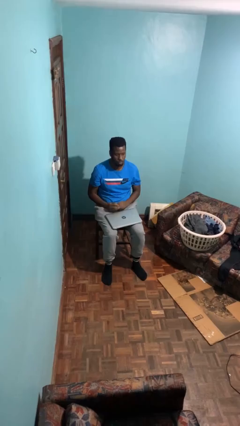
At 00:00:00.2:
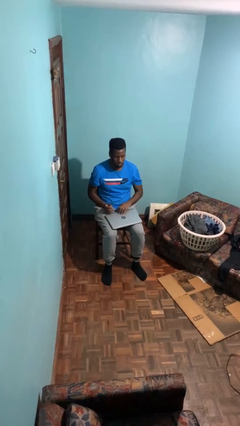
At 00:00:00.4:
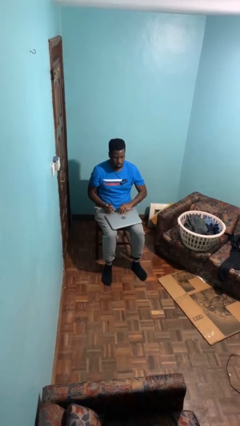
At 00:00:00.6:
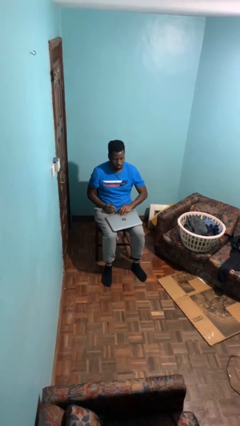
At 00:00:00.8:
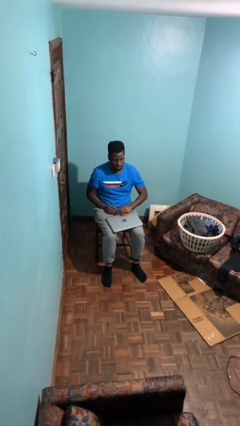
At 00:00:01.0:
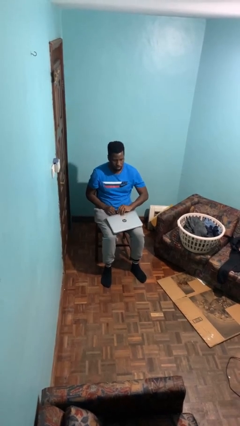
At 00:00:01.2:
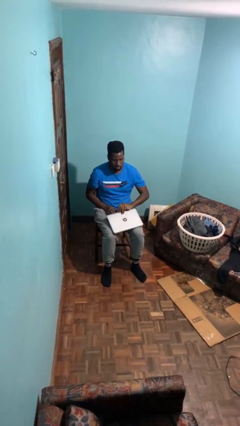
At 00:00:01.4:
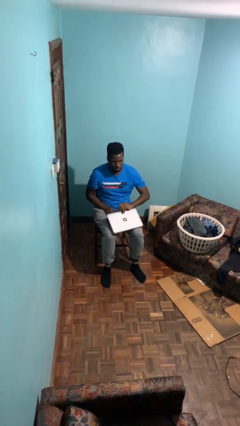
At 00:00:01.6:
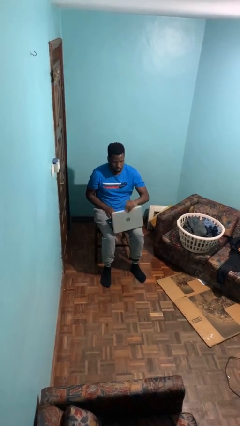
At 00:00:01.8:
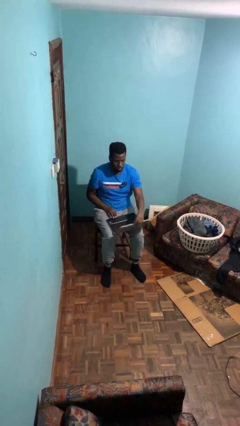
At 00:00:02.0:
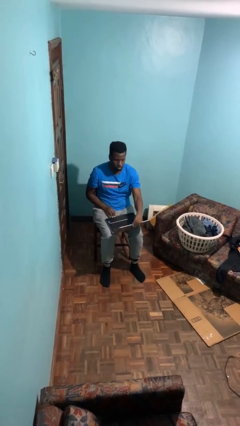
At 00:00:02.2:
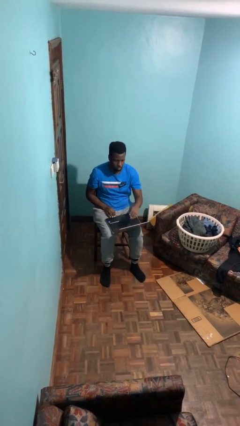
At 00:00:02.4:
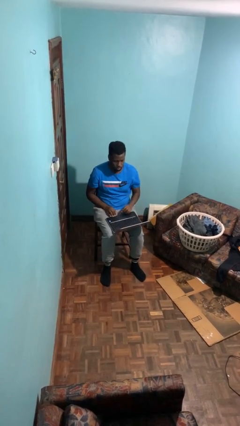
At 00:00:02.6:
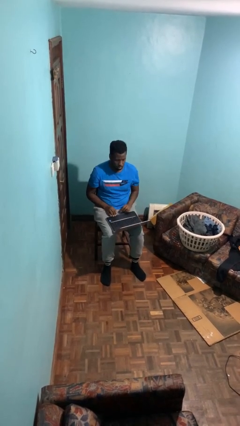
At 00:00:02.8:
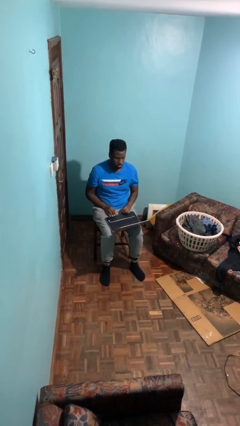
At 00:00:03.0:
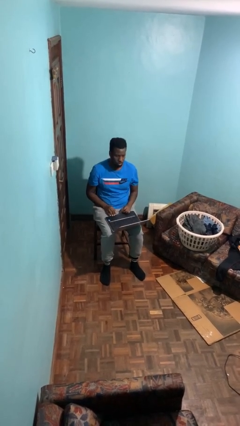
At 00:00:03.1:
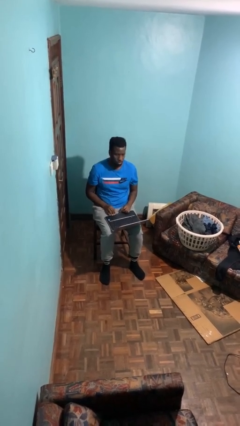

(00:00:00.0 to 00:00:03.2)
person opens laptop

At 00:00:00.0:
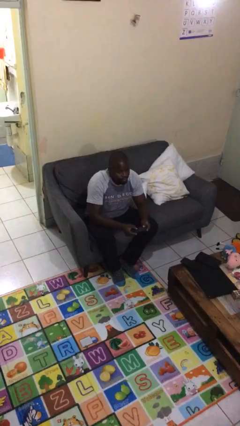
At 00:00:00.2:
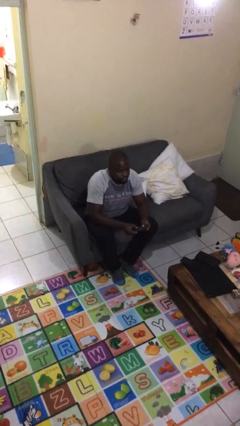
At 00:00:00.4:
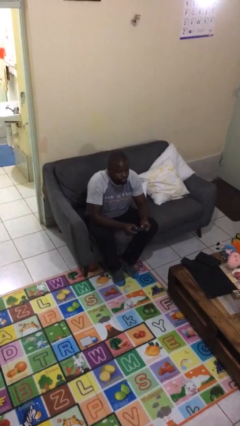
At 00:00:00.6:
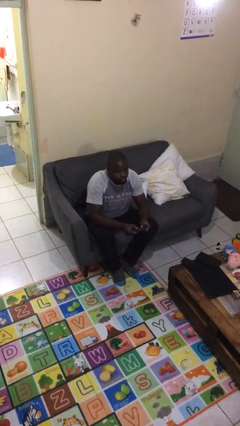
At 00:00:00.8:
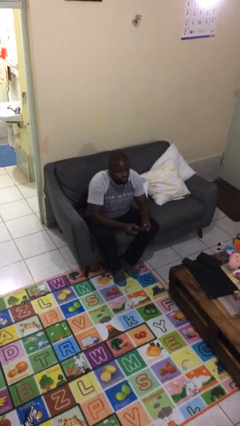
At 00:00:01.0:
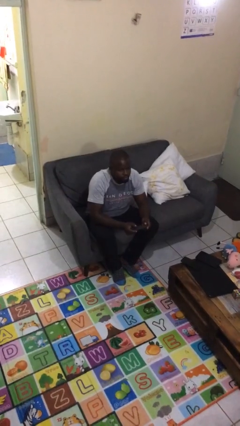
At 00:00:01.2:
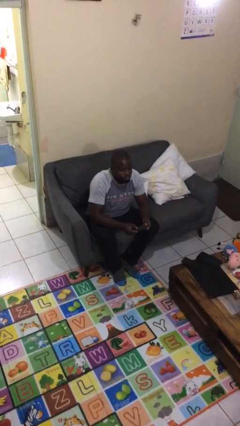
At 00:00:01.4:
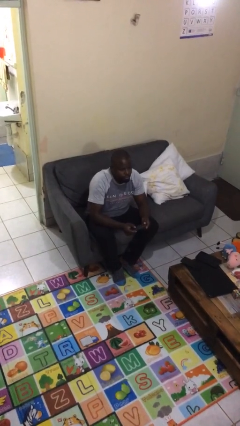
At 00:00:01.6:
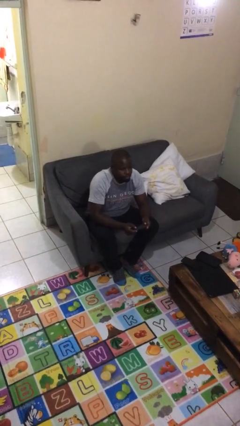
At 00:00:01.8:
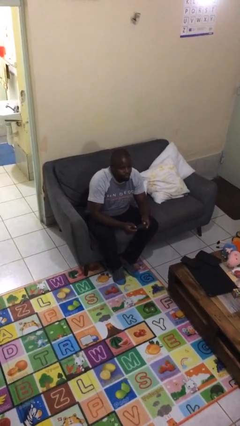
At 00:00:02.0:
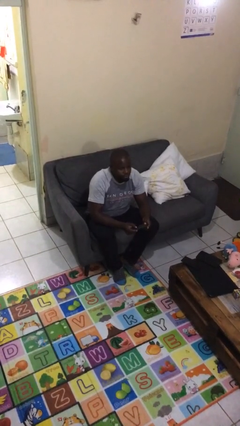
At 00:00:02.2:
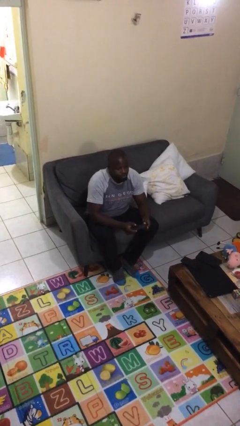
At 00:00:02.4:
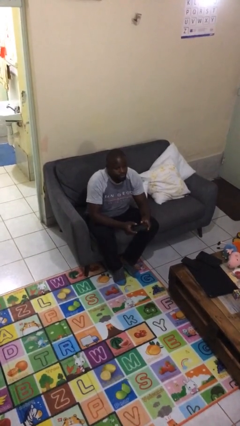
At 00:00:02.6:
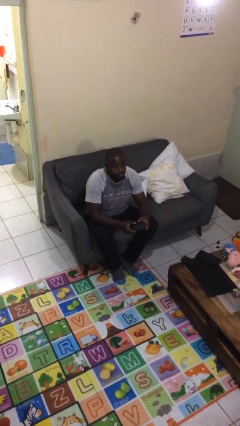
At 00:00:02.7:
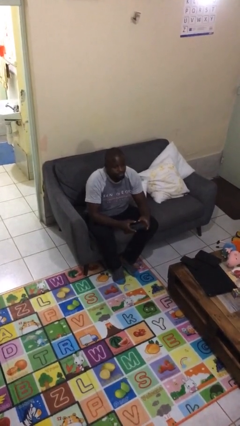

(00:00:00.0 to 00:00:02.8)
person interacts with handheld game

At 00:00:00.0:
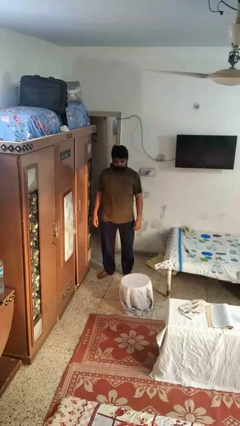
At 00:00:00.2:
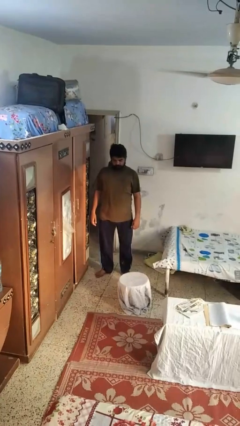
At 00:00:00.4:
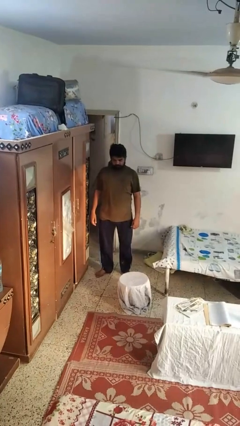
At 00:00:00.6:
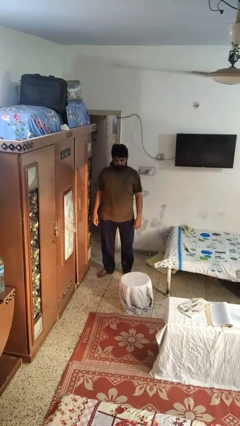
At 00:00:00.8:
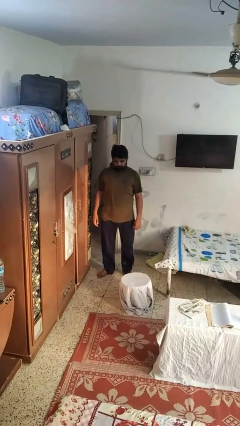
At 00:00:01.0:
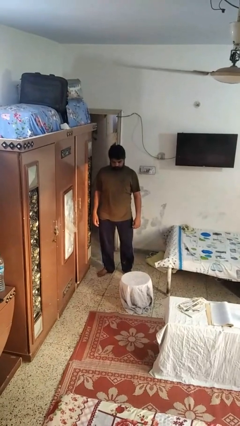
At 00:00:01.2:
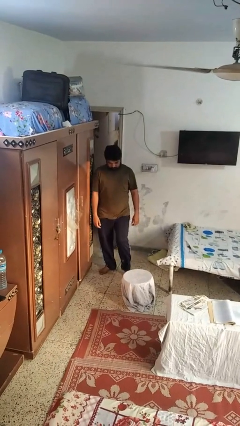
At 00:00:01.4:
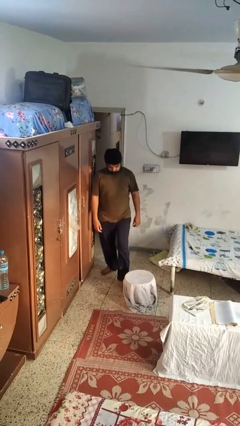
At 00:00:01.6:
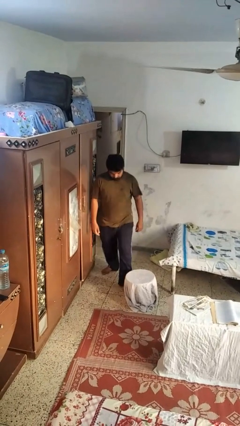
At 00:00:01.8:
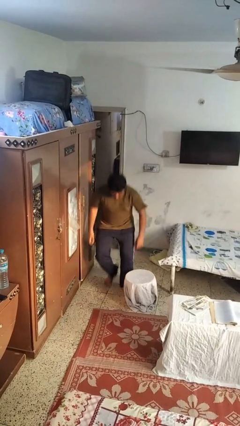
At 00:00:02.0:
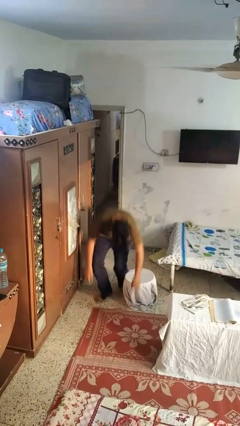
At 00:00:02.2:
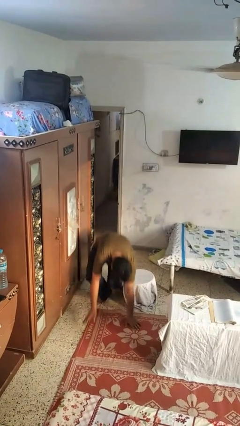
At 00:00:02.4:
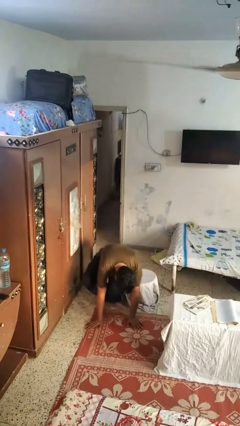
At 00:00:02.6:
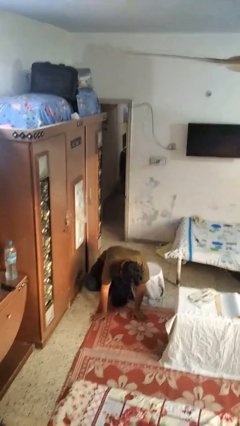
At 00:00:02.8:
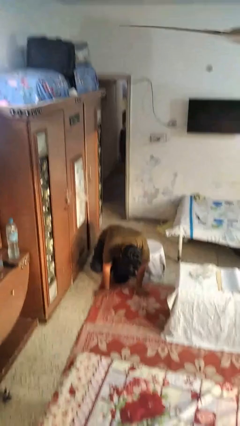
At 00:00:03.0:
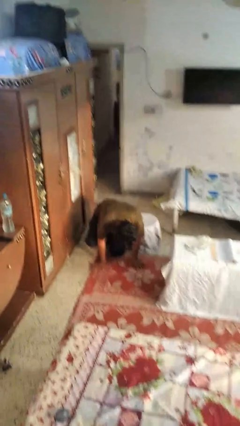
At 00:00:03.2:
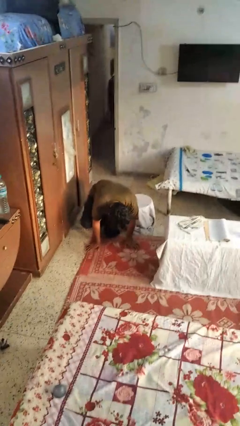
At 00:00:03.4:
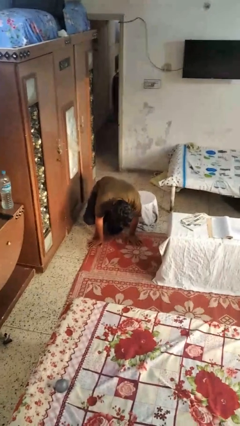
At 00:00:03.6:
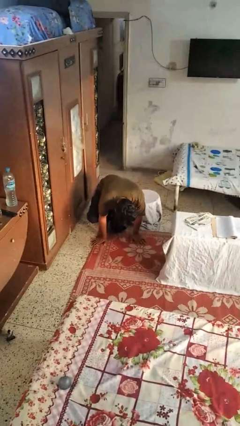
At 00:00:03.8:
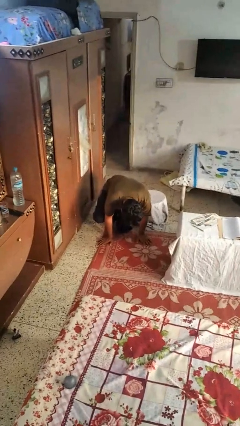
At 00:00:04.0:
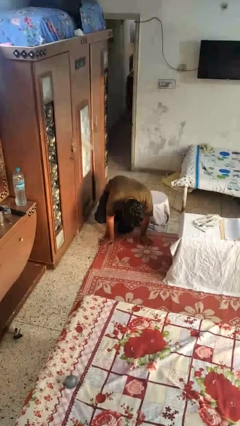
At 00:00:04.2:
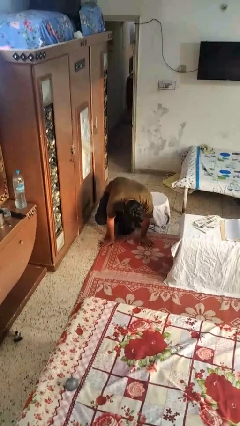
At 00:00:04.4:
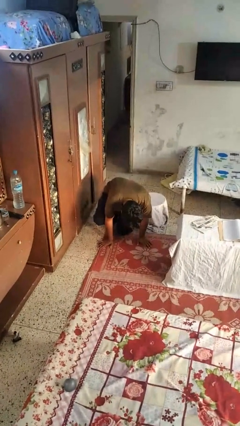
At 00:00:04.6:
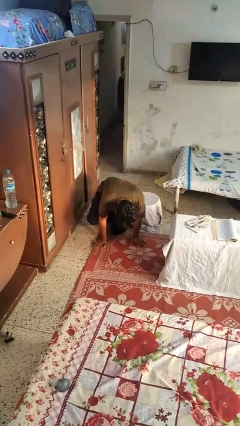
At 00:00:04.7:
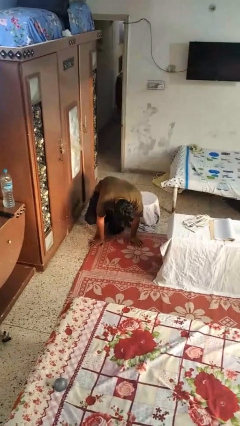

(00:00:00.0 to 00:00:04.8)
person trips on object on floor

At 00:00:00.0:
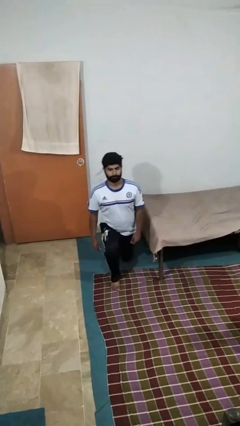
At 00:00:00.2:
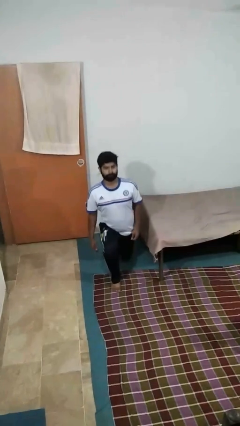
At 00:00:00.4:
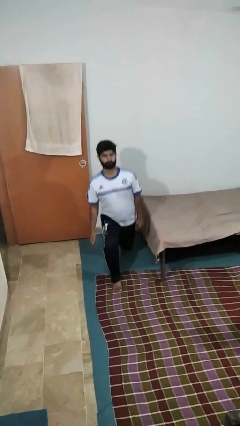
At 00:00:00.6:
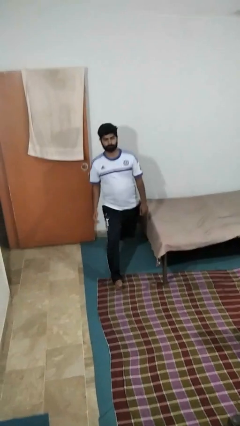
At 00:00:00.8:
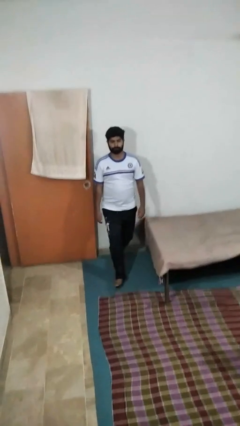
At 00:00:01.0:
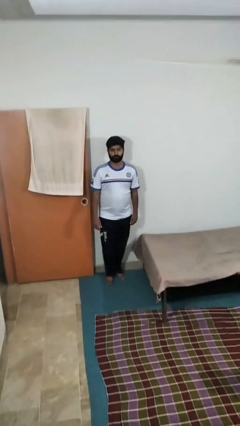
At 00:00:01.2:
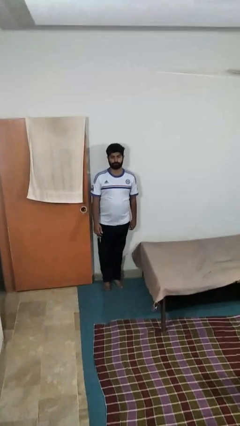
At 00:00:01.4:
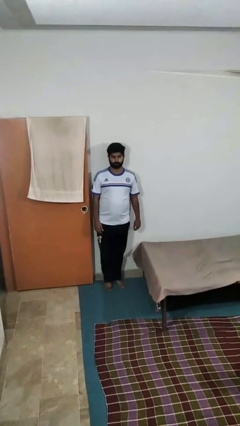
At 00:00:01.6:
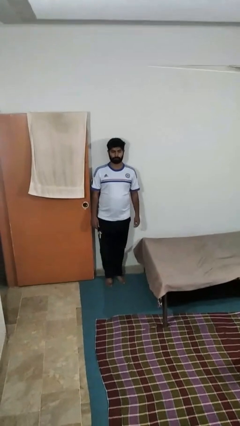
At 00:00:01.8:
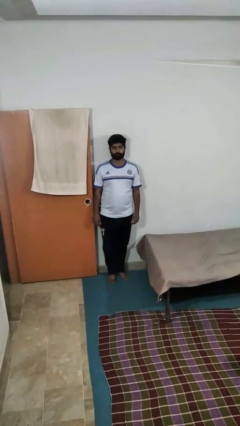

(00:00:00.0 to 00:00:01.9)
person stands up from floor

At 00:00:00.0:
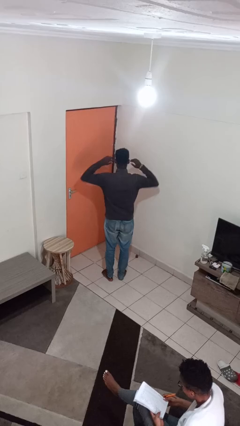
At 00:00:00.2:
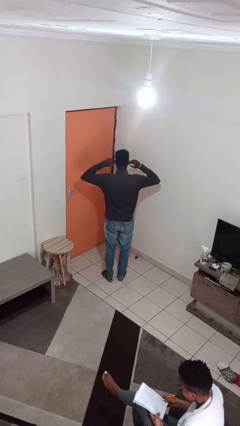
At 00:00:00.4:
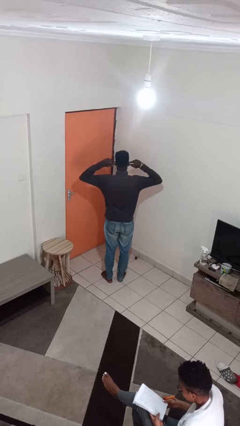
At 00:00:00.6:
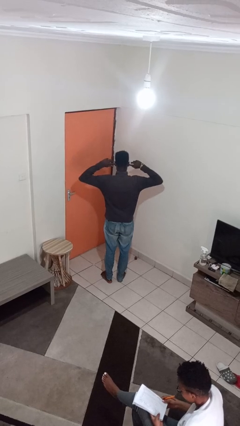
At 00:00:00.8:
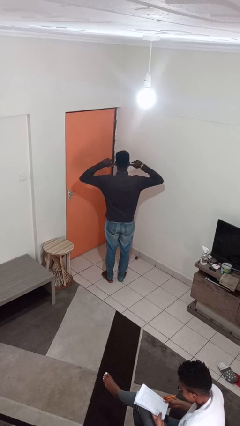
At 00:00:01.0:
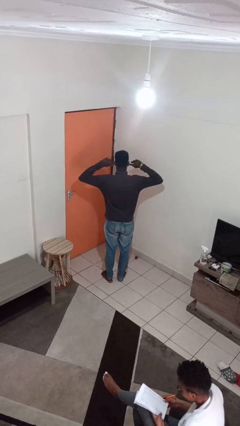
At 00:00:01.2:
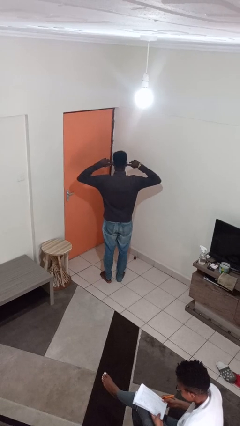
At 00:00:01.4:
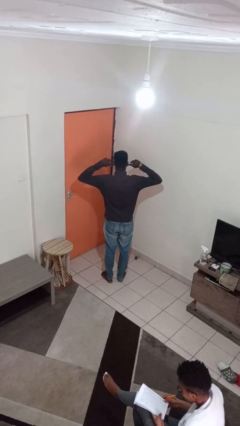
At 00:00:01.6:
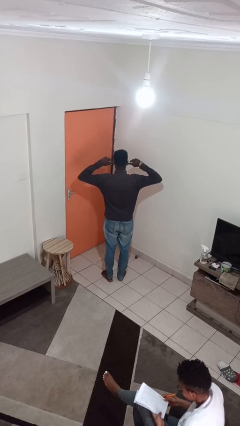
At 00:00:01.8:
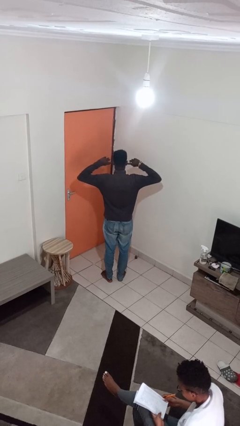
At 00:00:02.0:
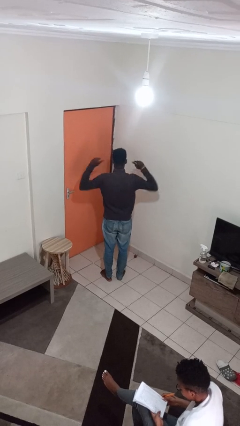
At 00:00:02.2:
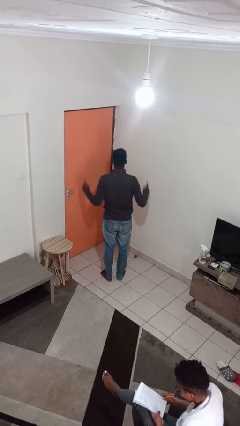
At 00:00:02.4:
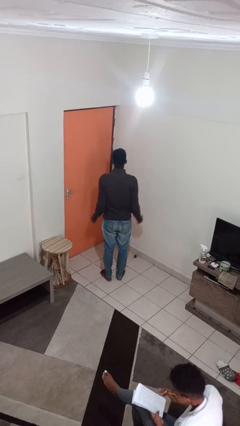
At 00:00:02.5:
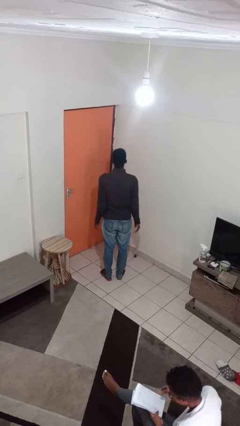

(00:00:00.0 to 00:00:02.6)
person puts fingers in ear

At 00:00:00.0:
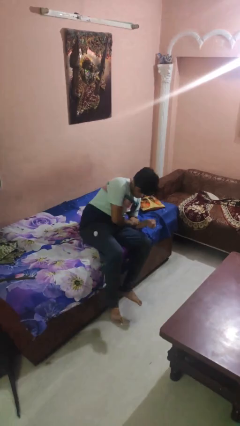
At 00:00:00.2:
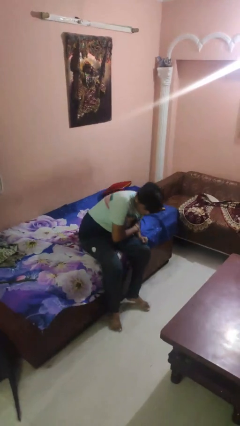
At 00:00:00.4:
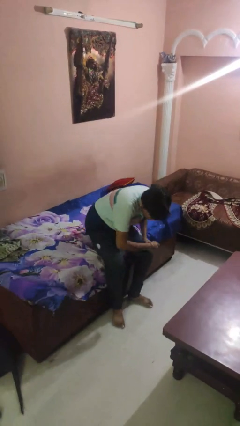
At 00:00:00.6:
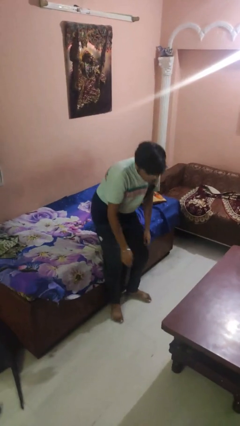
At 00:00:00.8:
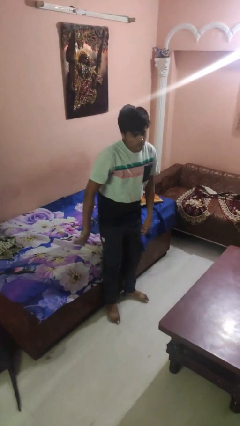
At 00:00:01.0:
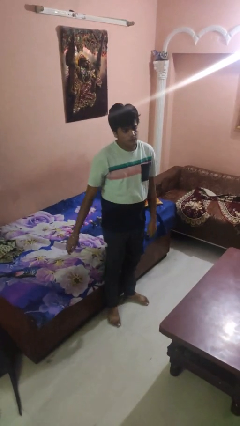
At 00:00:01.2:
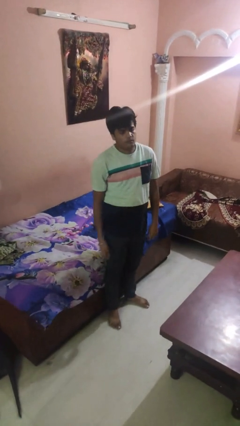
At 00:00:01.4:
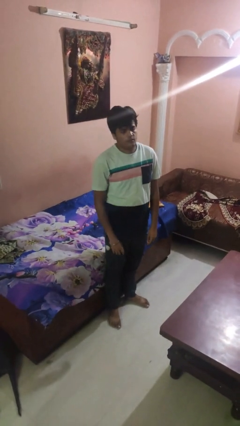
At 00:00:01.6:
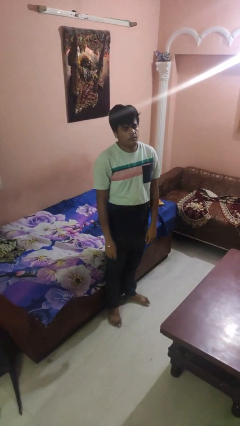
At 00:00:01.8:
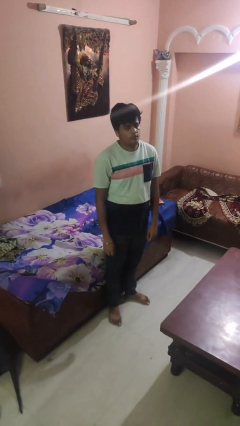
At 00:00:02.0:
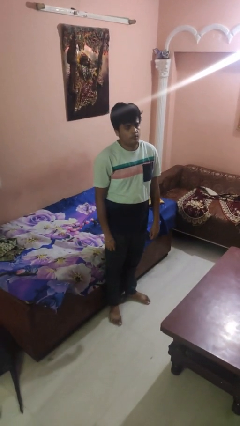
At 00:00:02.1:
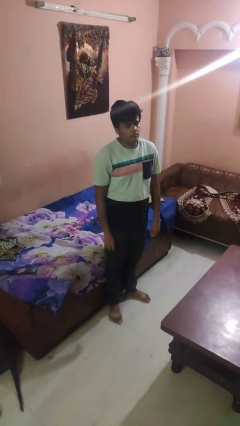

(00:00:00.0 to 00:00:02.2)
person stands up
